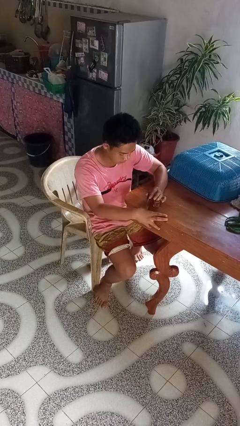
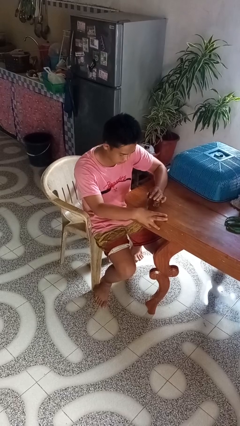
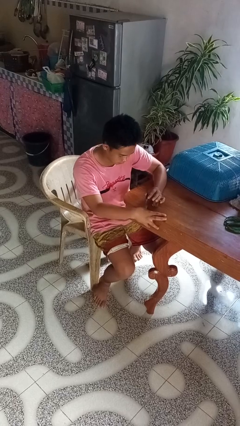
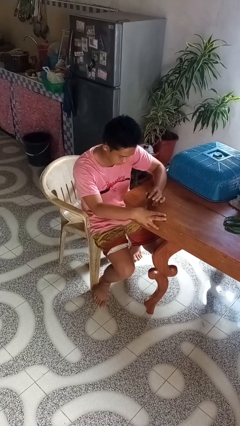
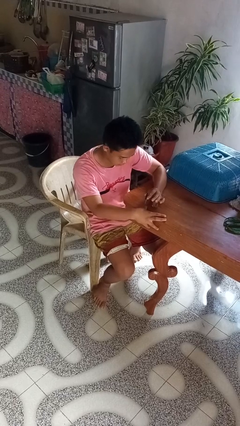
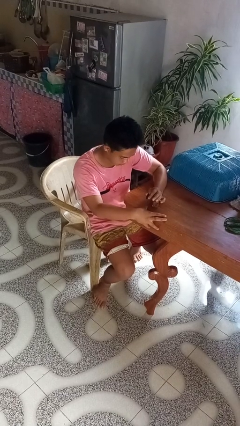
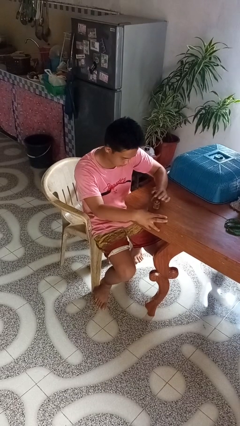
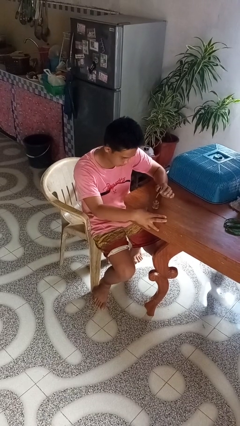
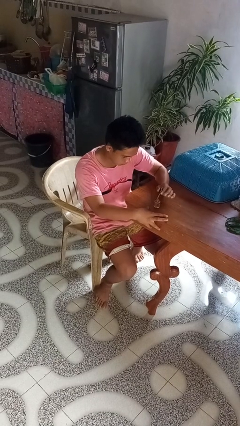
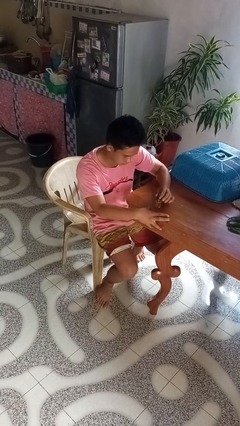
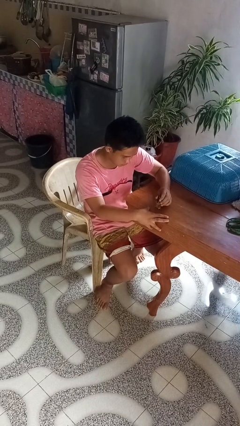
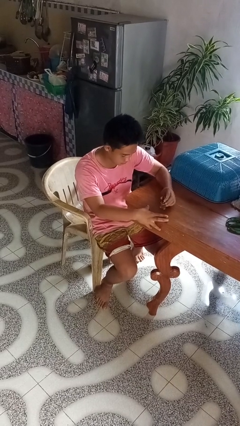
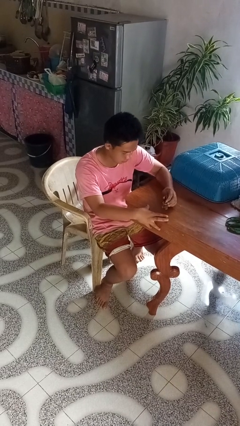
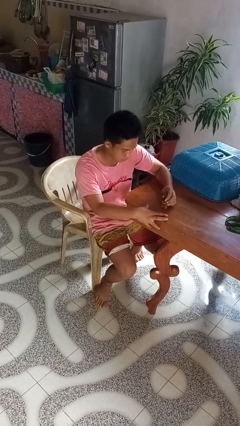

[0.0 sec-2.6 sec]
person paints fingernails

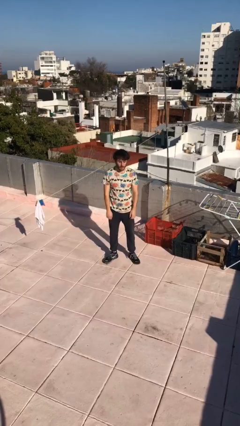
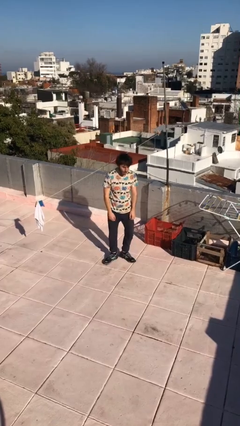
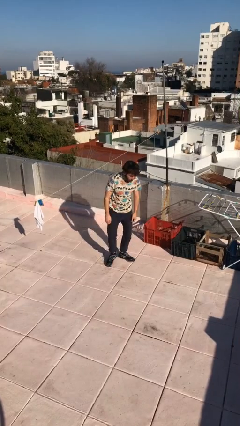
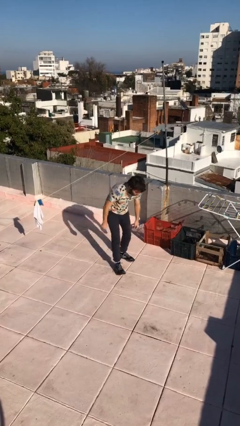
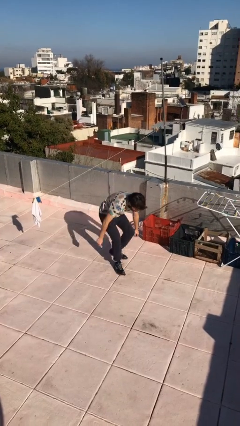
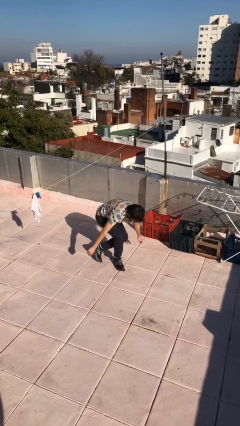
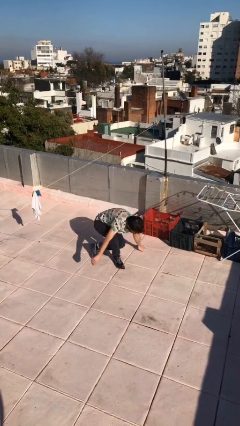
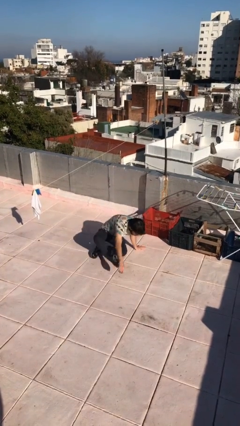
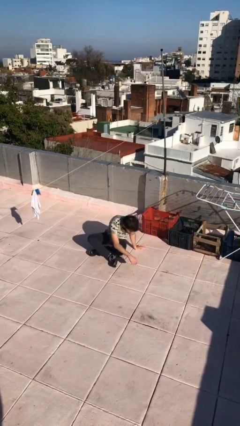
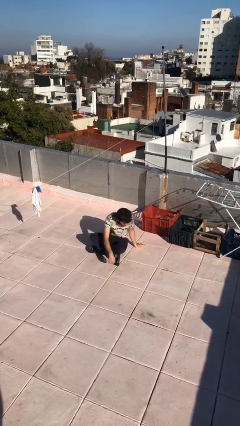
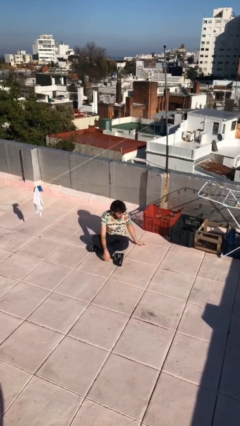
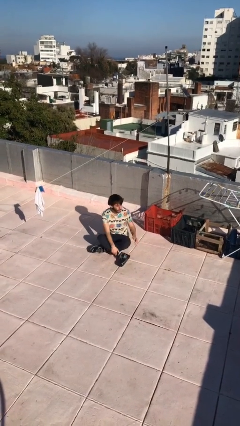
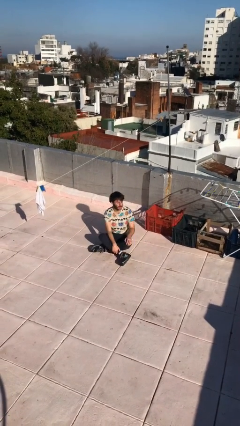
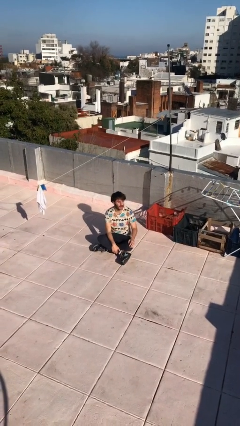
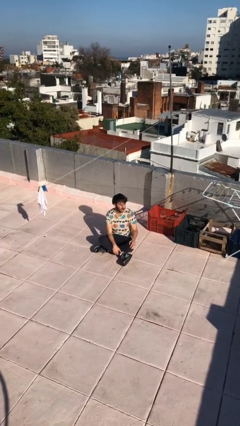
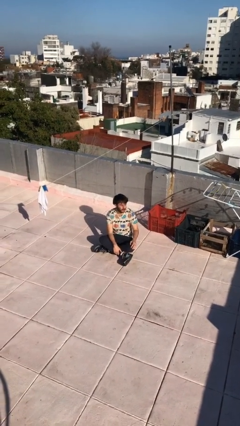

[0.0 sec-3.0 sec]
person sits crisscross

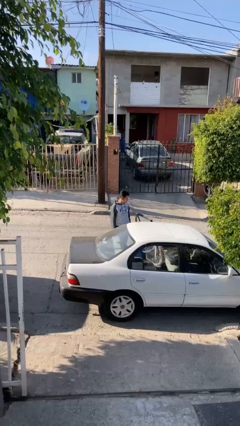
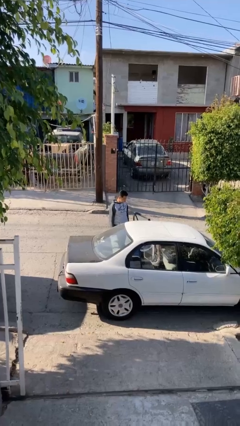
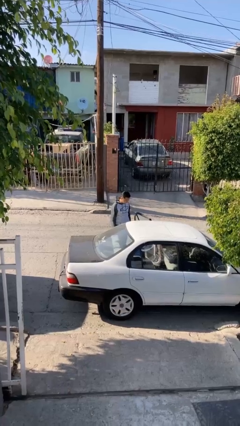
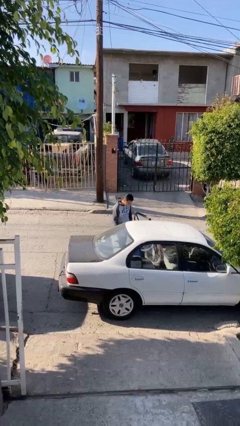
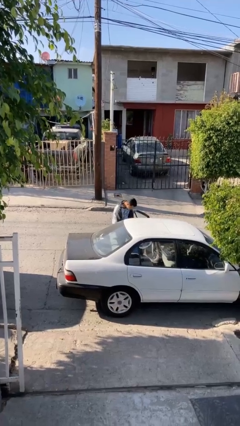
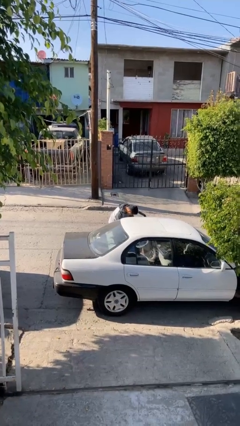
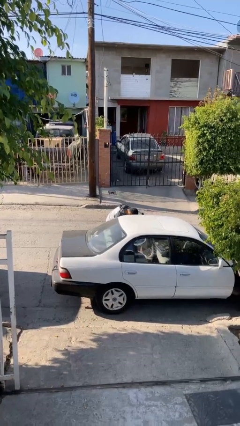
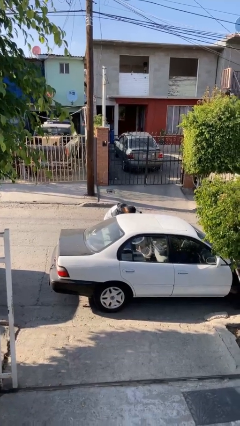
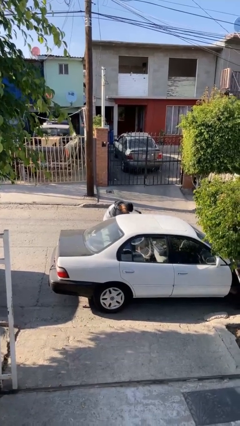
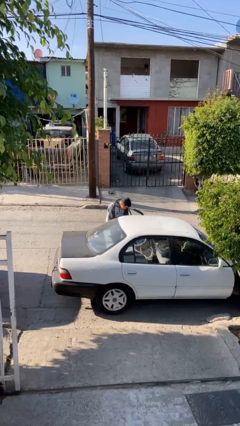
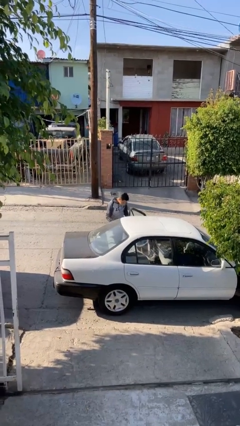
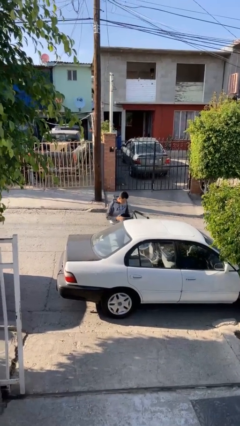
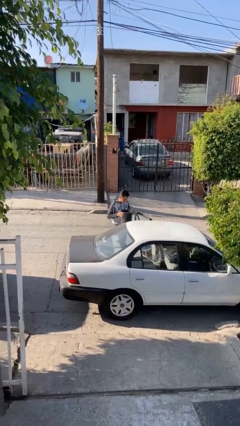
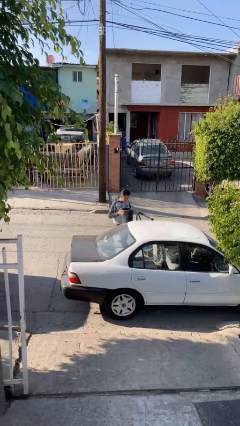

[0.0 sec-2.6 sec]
person unloads car

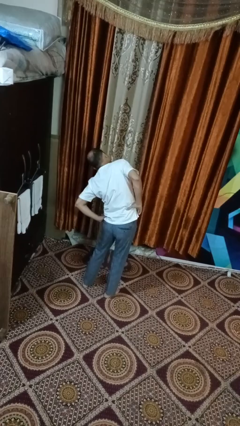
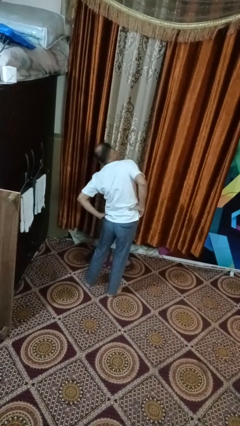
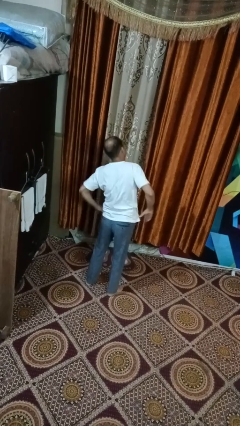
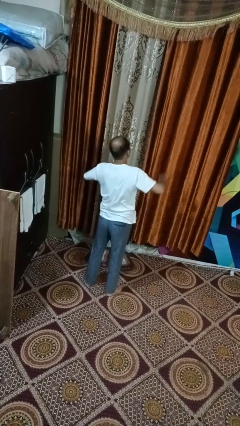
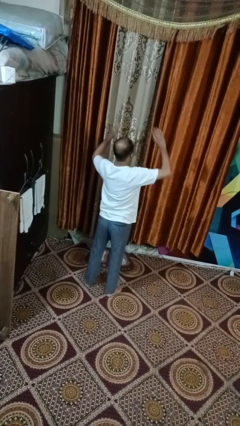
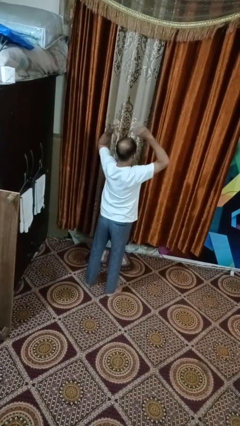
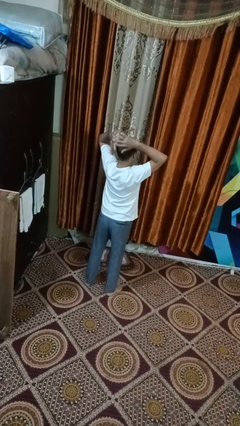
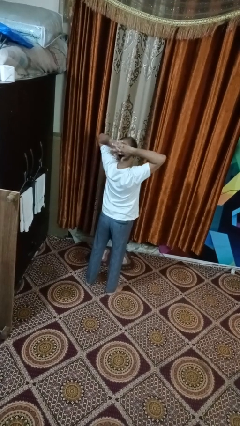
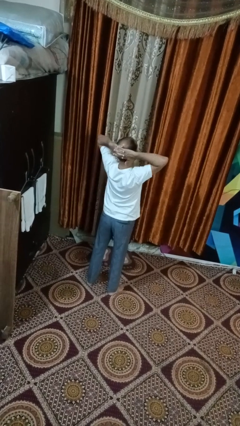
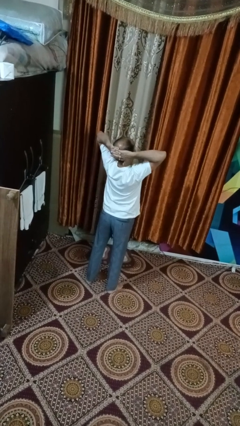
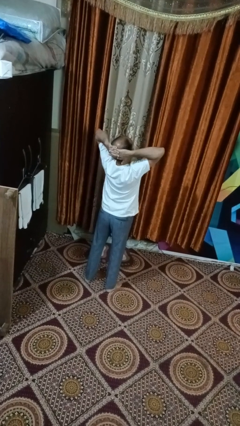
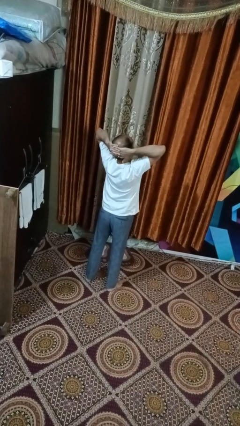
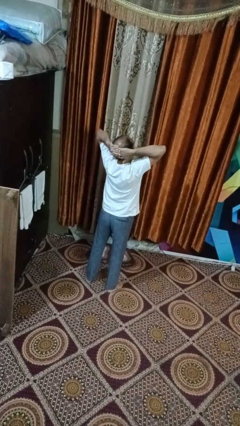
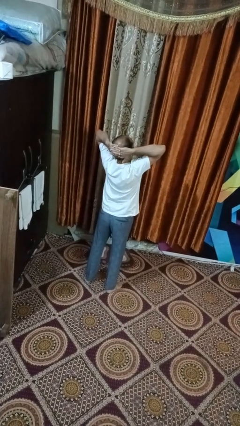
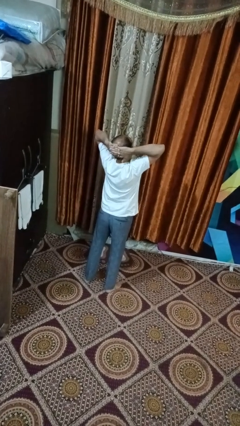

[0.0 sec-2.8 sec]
person stretches arms over head

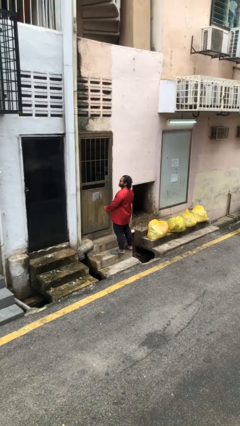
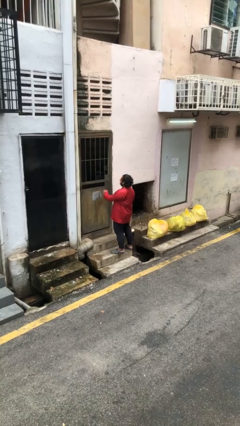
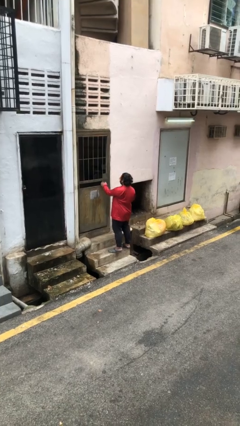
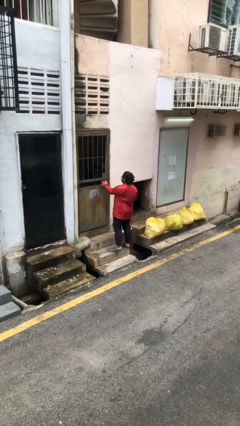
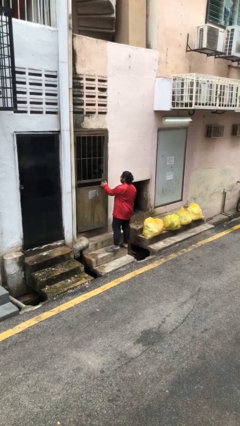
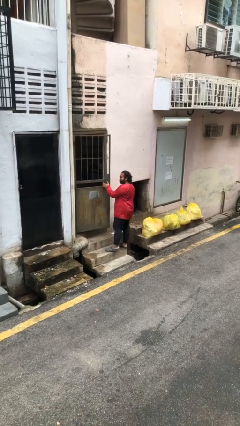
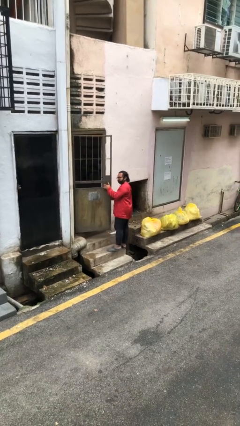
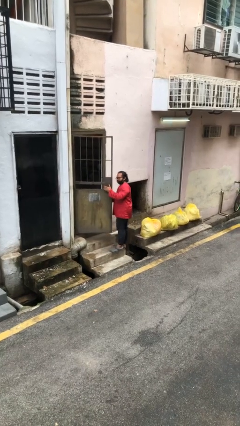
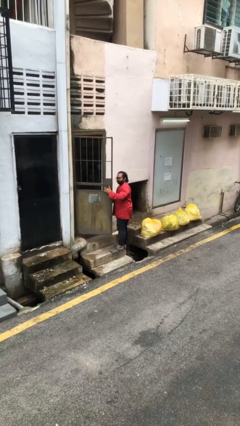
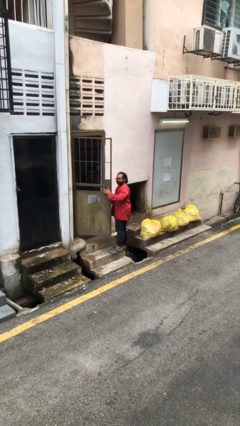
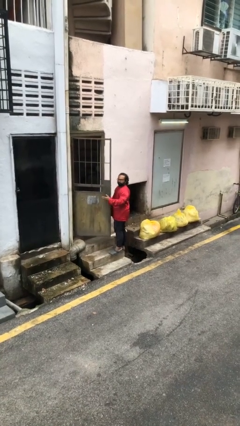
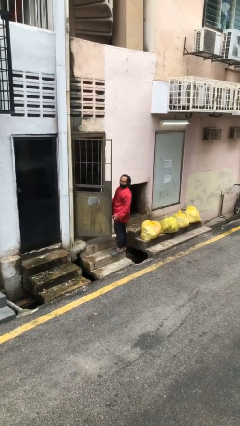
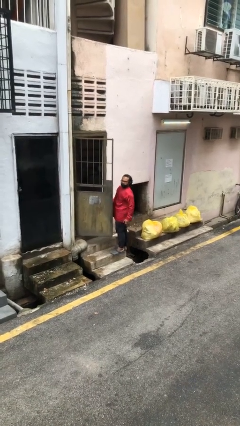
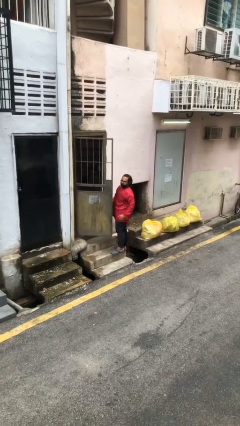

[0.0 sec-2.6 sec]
person opens facility door

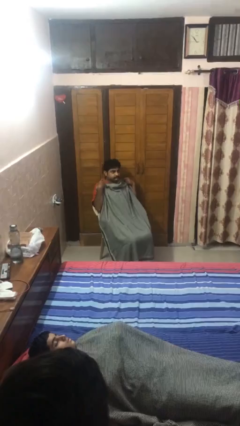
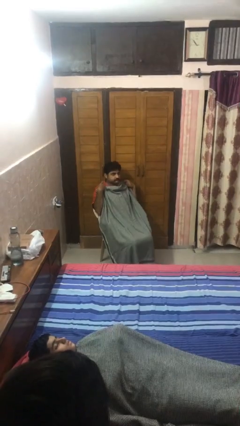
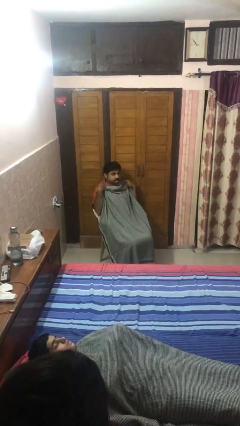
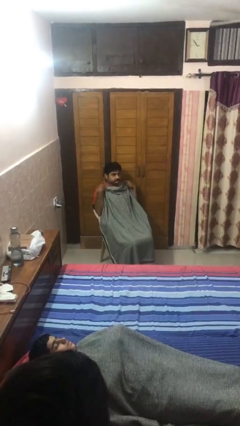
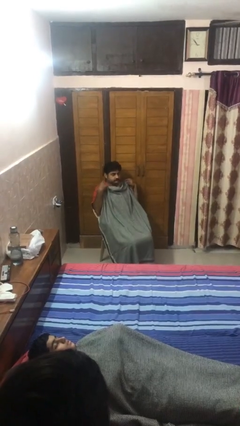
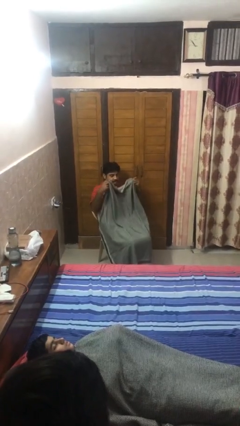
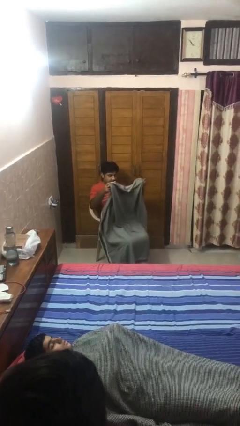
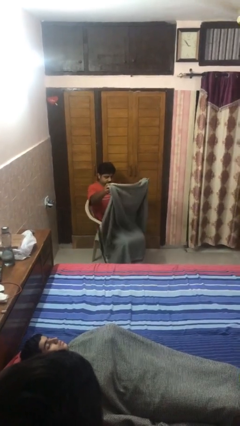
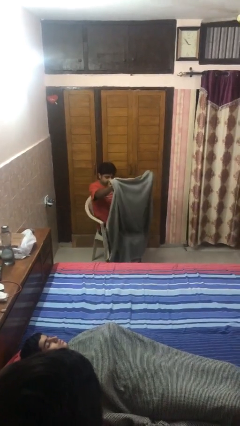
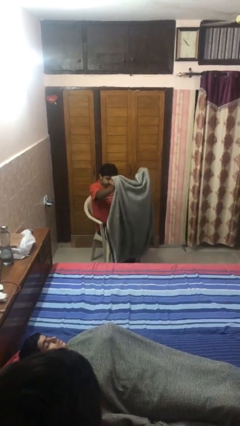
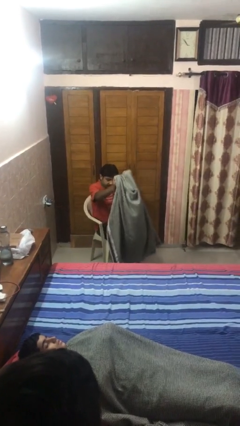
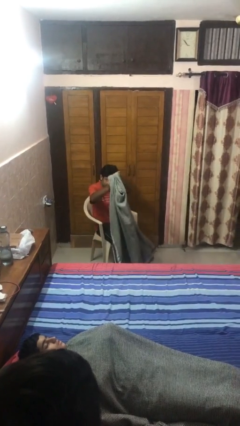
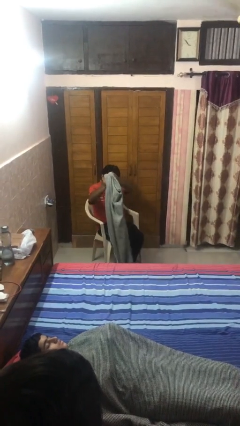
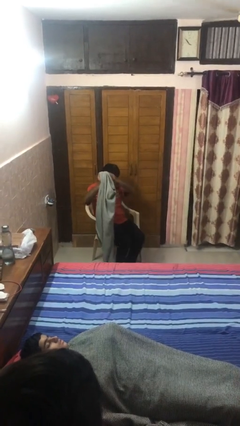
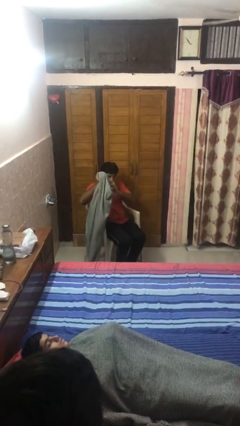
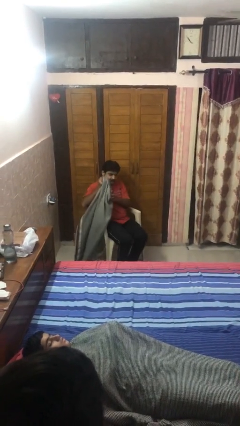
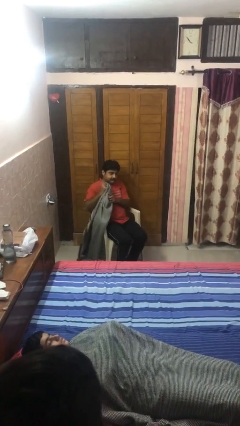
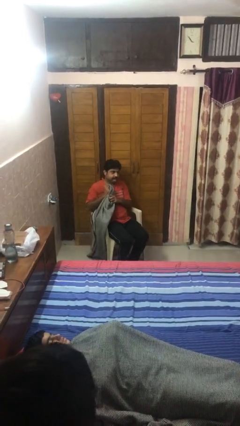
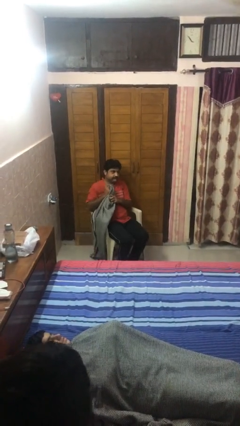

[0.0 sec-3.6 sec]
person uncovers with blanket
